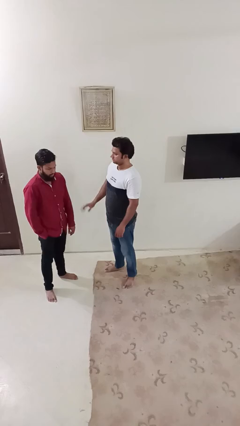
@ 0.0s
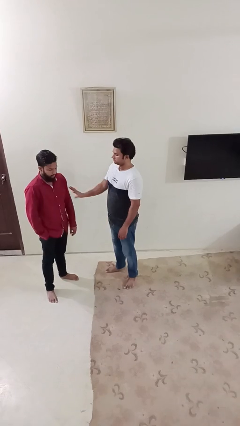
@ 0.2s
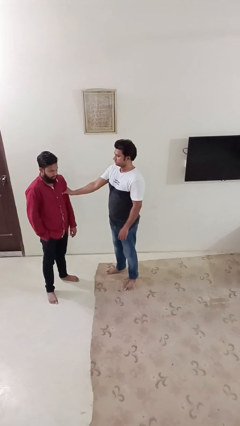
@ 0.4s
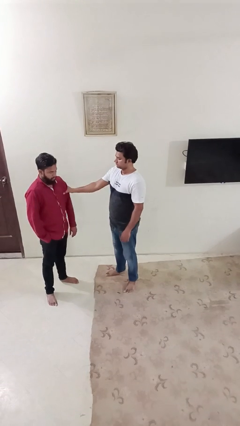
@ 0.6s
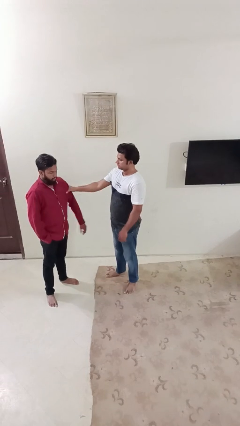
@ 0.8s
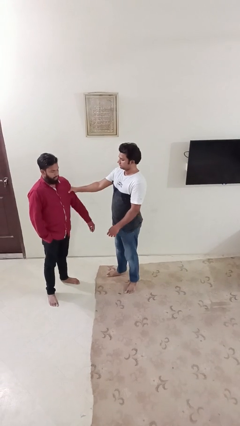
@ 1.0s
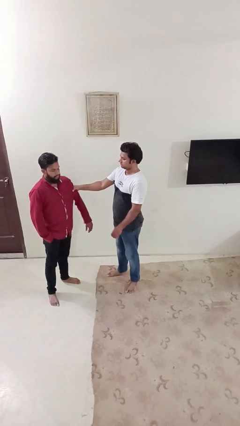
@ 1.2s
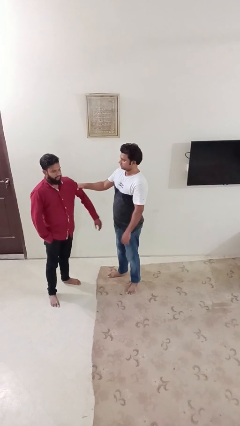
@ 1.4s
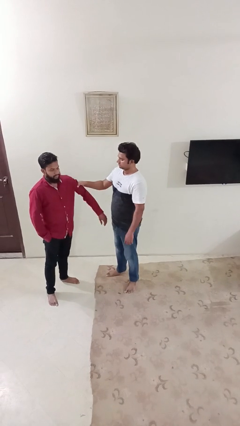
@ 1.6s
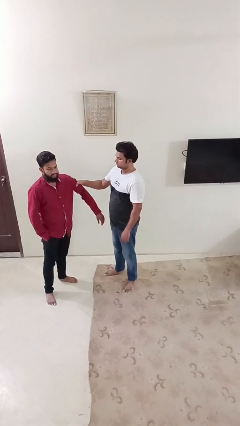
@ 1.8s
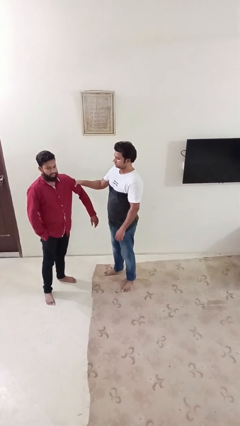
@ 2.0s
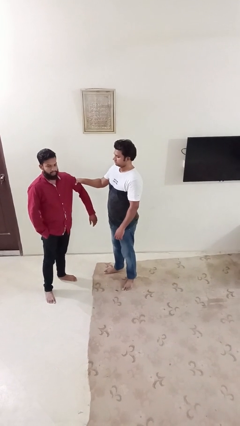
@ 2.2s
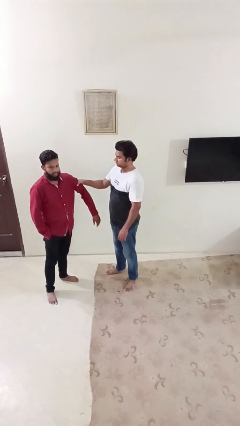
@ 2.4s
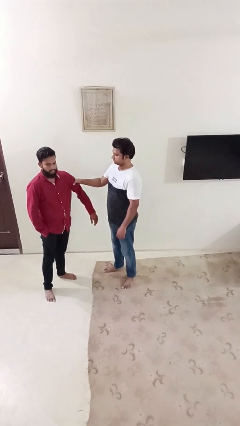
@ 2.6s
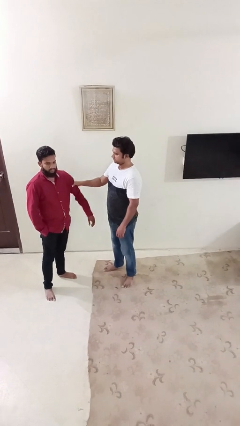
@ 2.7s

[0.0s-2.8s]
person grabs person by bicep

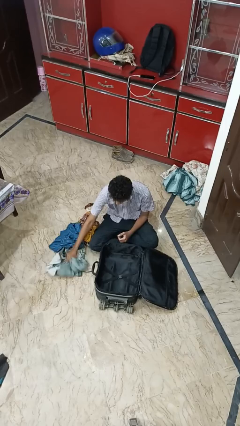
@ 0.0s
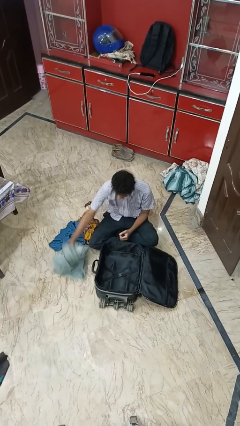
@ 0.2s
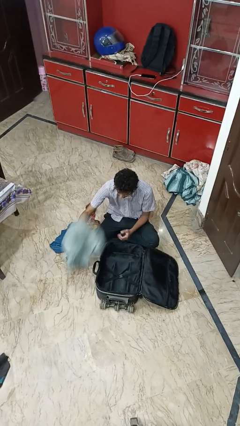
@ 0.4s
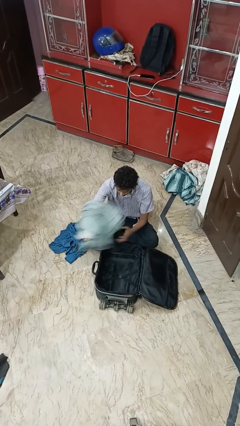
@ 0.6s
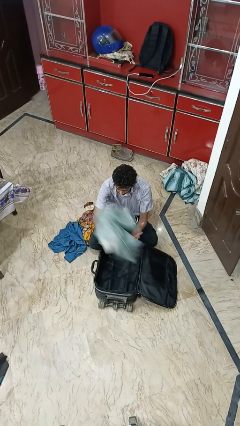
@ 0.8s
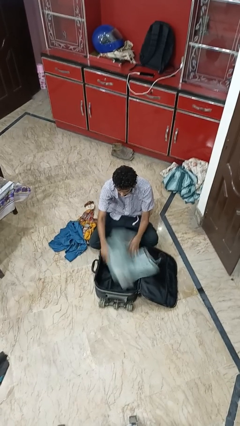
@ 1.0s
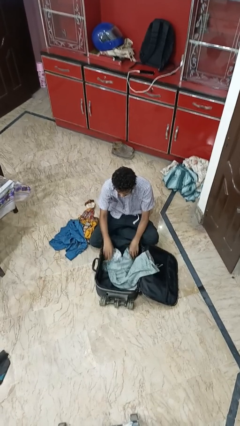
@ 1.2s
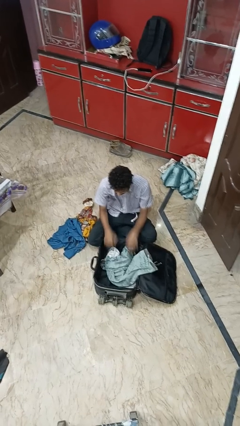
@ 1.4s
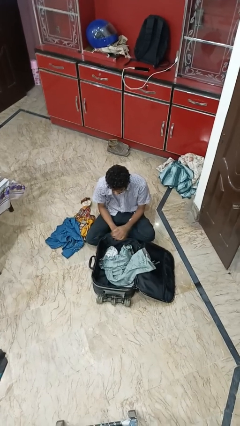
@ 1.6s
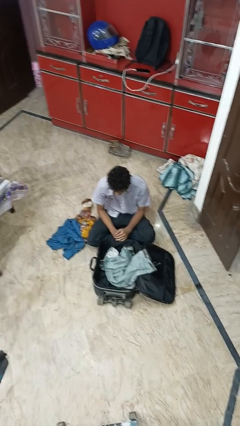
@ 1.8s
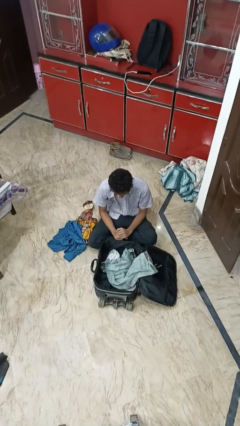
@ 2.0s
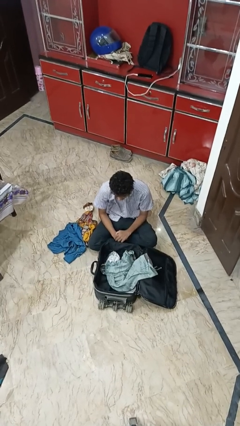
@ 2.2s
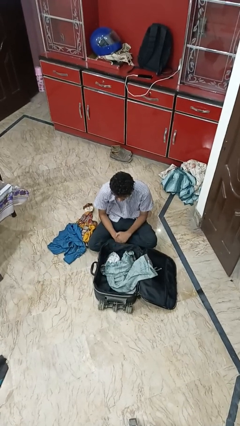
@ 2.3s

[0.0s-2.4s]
person loads clothes into suitcase

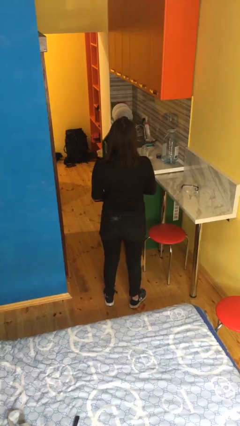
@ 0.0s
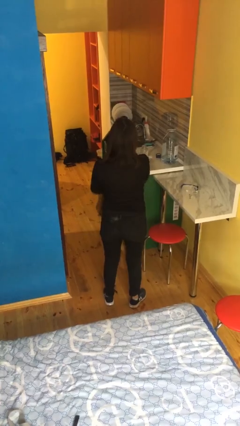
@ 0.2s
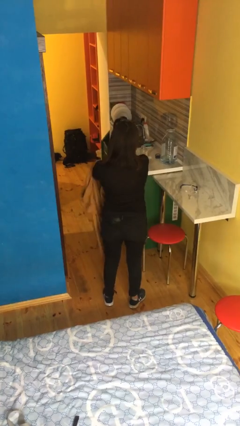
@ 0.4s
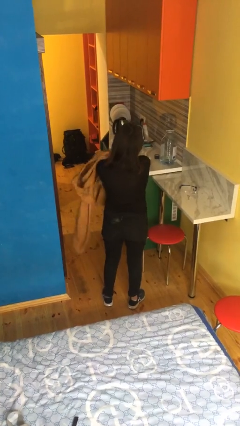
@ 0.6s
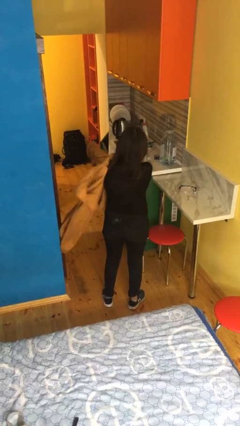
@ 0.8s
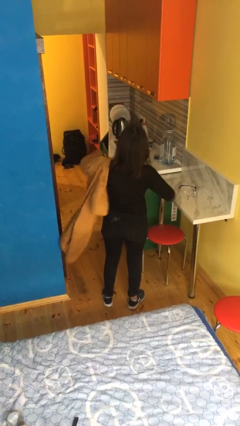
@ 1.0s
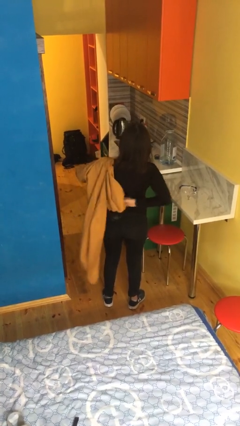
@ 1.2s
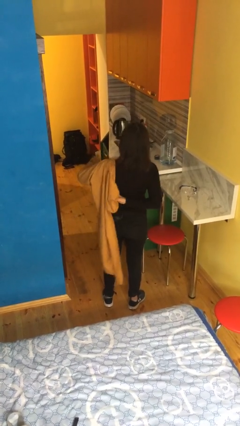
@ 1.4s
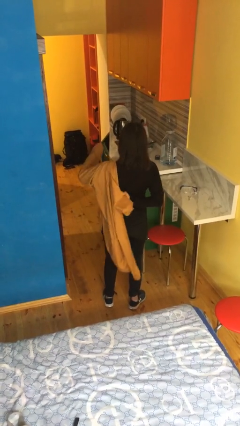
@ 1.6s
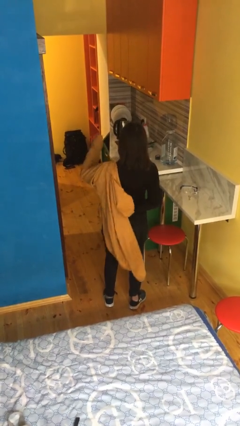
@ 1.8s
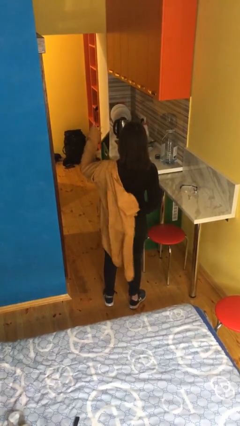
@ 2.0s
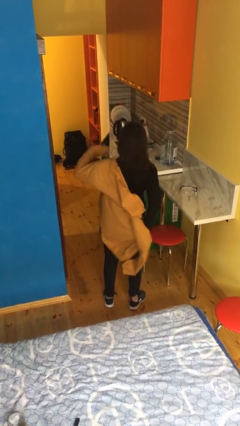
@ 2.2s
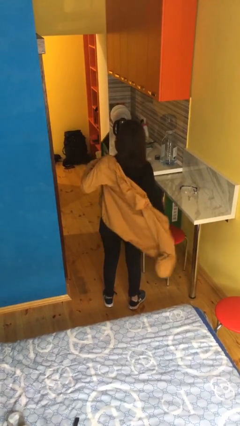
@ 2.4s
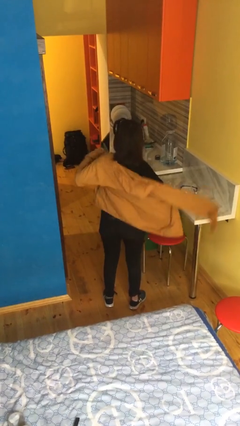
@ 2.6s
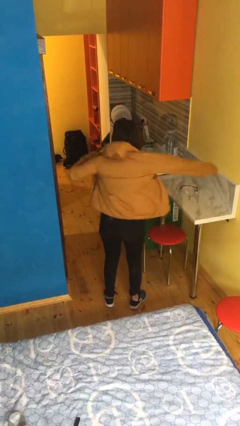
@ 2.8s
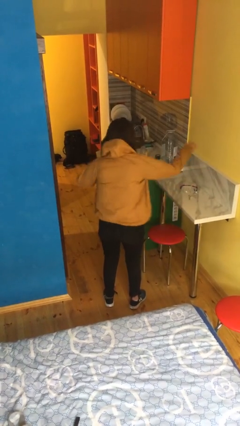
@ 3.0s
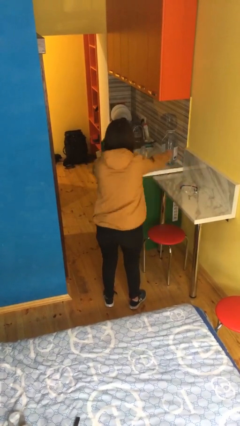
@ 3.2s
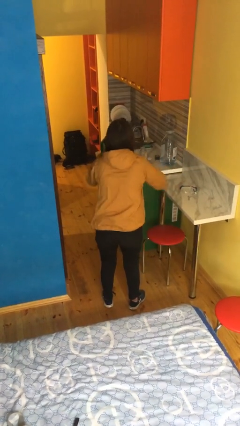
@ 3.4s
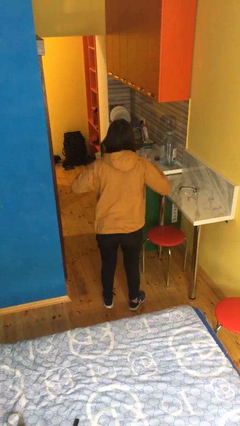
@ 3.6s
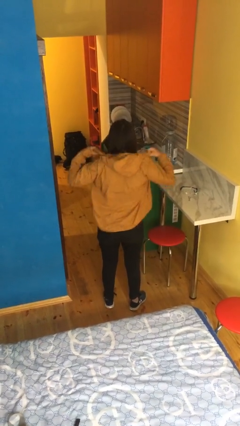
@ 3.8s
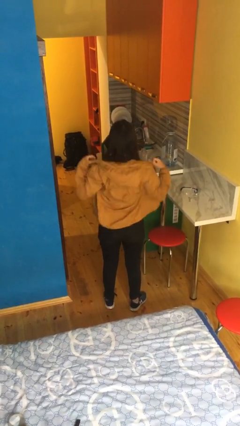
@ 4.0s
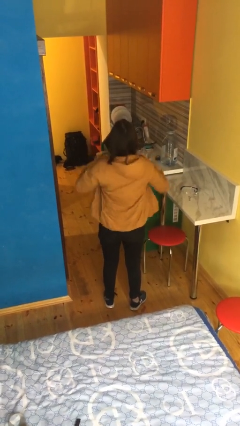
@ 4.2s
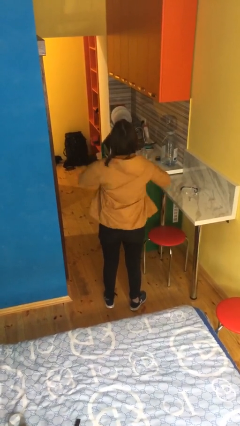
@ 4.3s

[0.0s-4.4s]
person puts on jacket

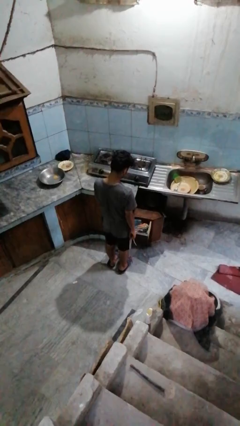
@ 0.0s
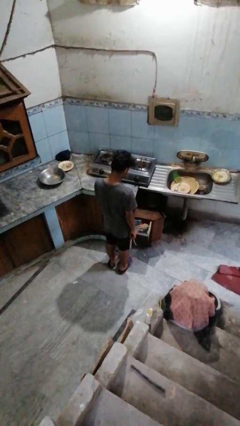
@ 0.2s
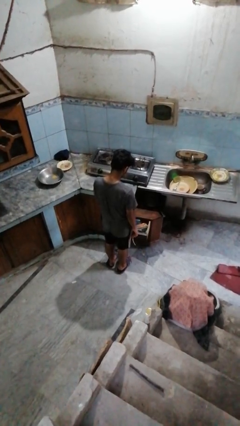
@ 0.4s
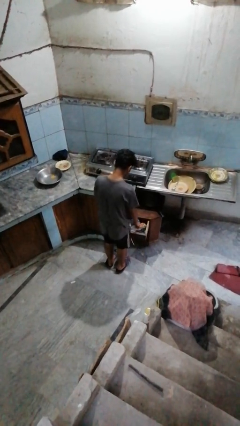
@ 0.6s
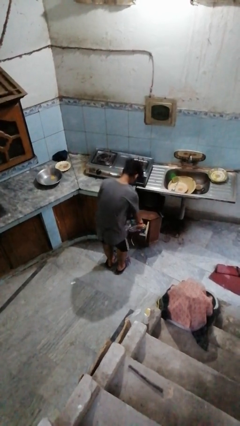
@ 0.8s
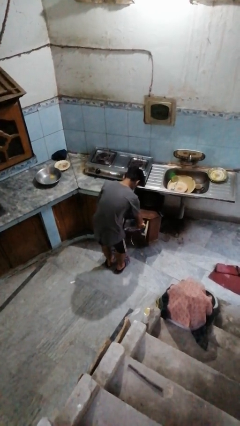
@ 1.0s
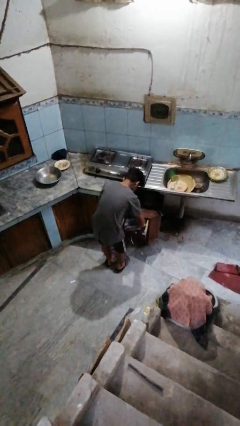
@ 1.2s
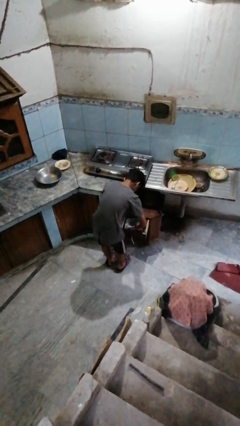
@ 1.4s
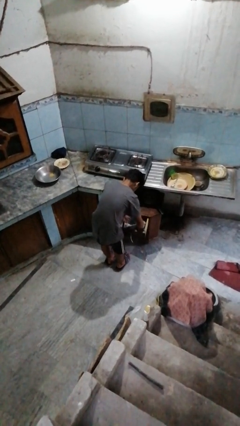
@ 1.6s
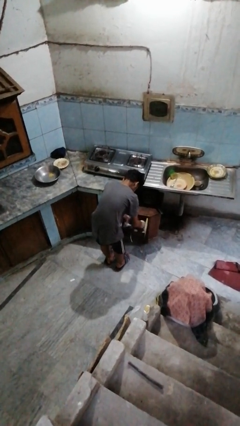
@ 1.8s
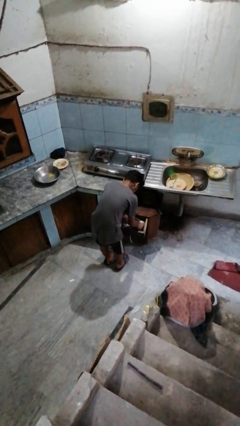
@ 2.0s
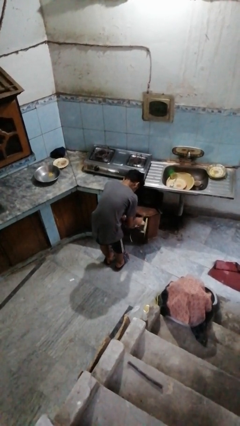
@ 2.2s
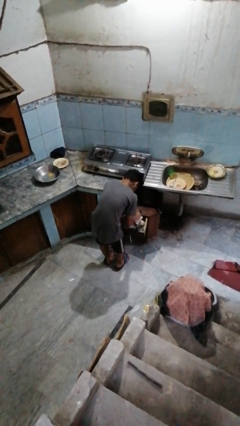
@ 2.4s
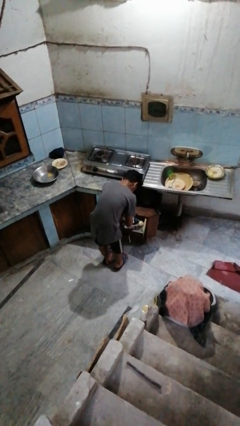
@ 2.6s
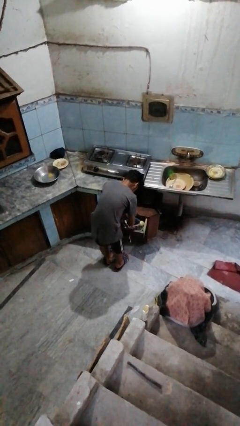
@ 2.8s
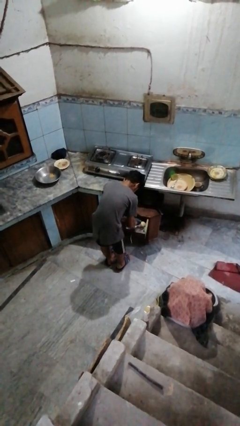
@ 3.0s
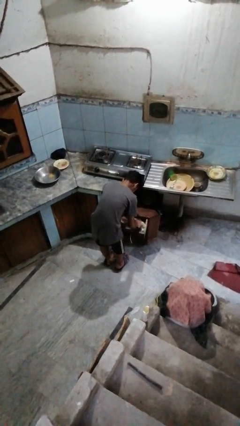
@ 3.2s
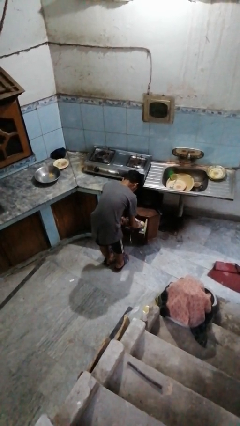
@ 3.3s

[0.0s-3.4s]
person searches in kitchen drawer

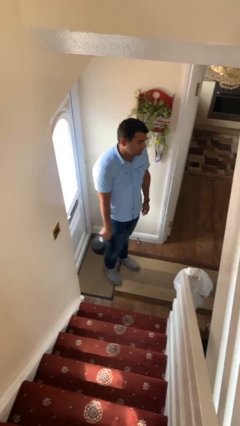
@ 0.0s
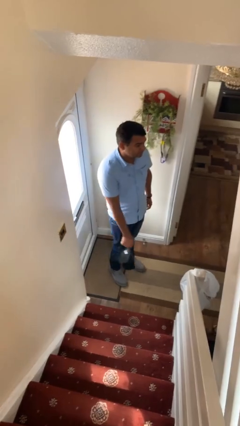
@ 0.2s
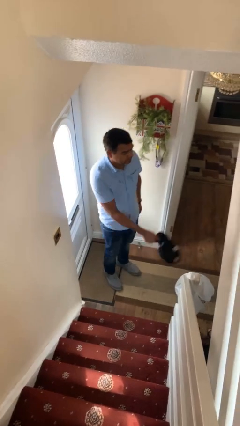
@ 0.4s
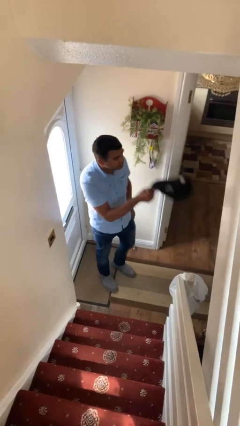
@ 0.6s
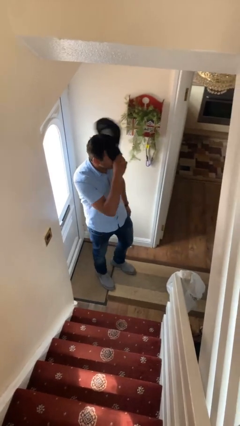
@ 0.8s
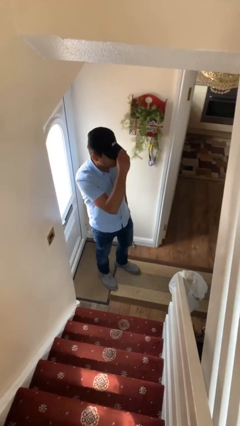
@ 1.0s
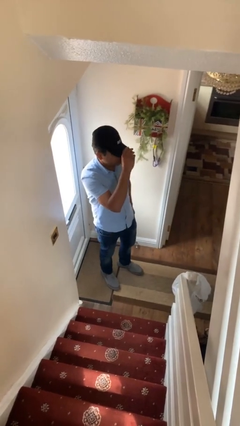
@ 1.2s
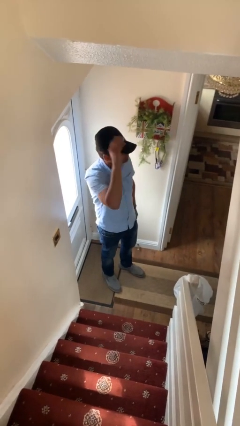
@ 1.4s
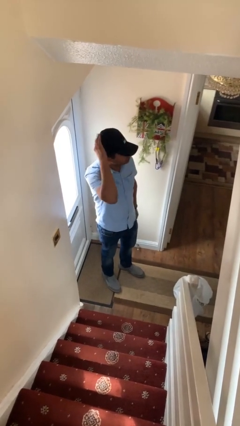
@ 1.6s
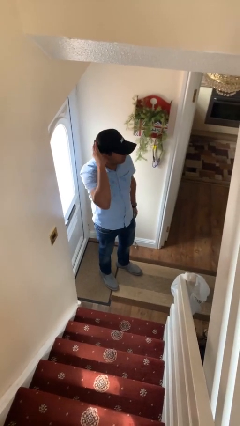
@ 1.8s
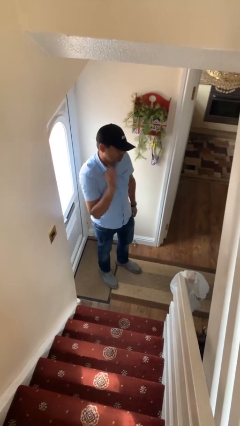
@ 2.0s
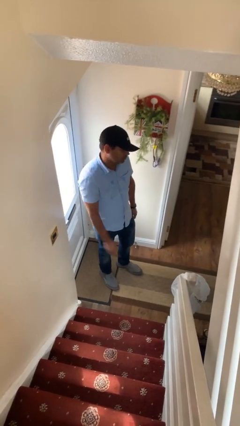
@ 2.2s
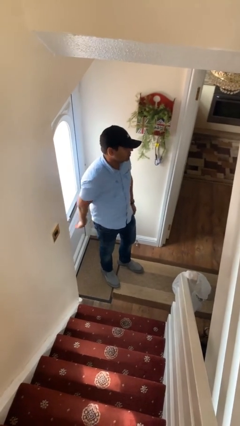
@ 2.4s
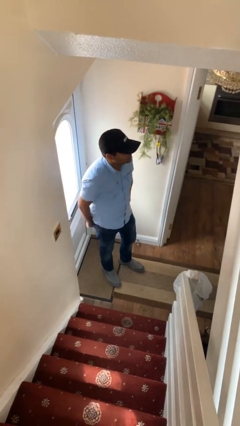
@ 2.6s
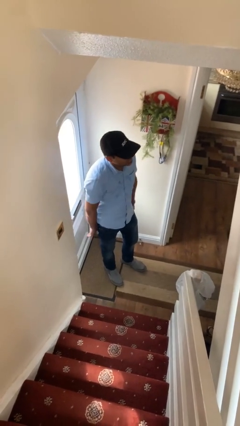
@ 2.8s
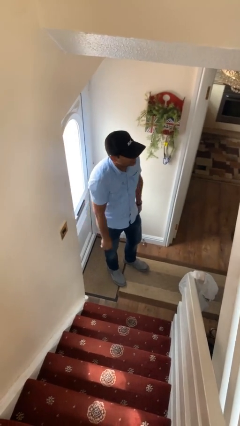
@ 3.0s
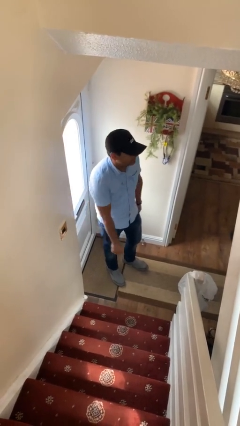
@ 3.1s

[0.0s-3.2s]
person puts on hat

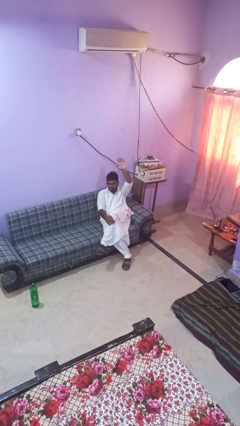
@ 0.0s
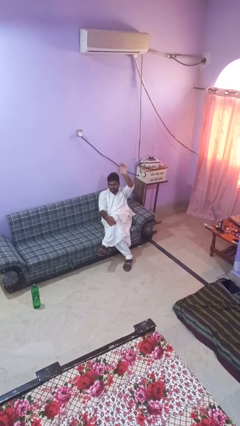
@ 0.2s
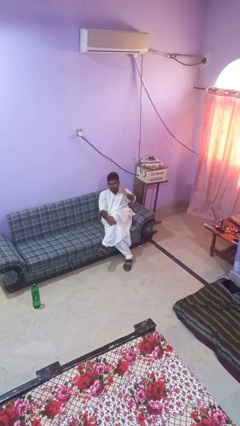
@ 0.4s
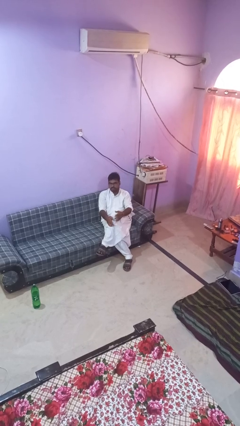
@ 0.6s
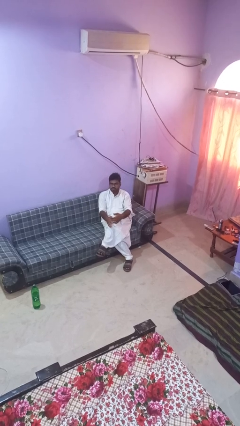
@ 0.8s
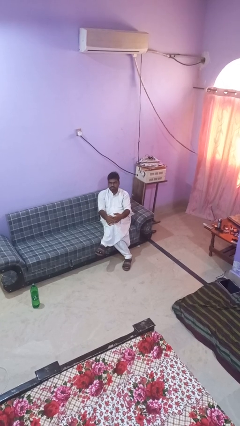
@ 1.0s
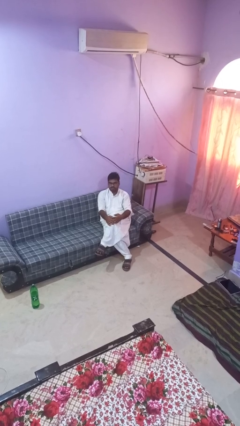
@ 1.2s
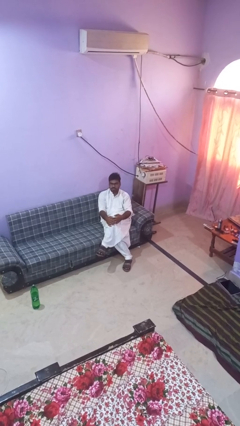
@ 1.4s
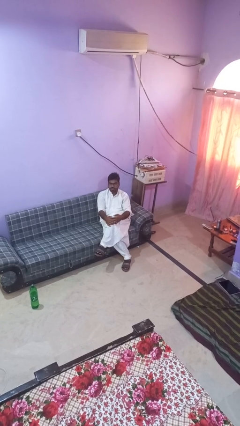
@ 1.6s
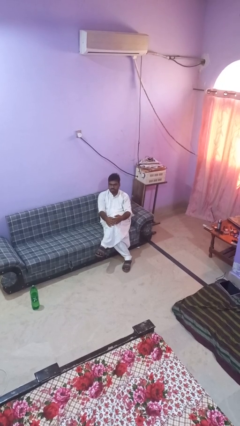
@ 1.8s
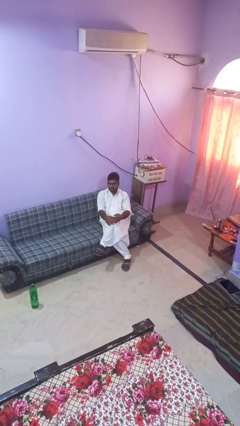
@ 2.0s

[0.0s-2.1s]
person gestures lower hand
